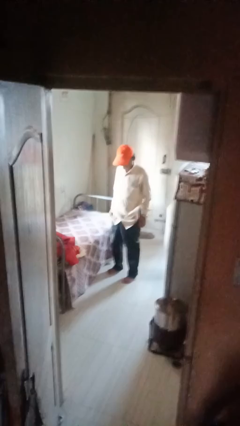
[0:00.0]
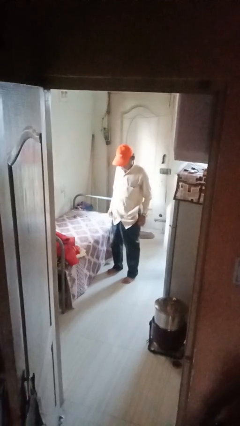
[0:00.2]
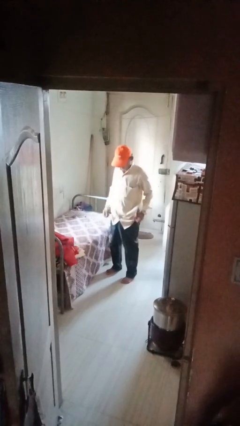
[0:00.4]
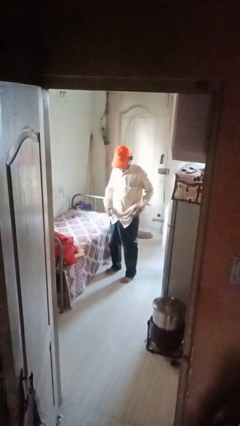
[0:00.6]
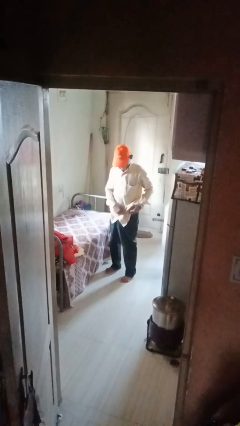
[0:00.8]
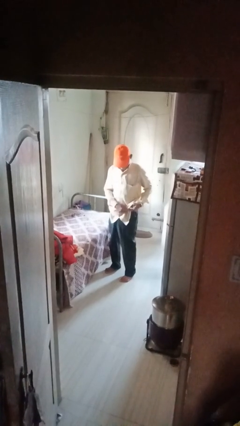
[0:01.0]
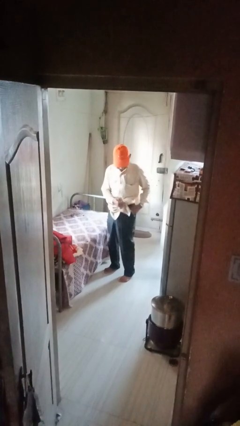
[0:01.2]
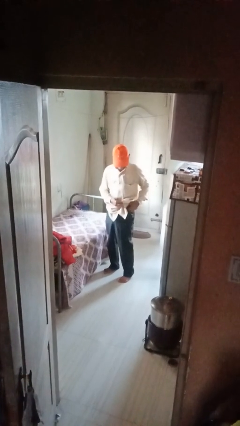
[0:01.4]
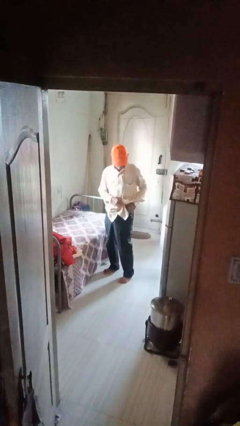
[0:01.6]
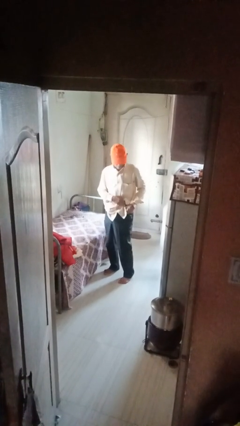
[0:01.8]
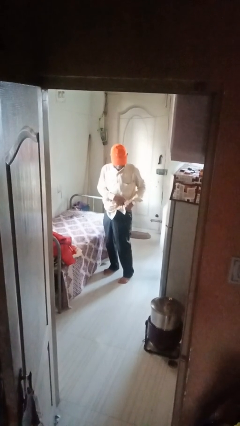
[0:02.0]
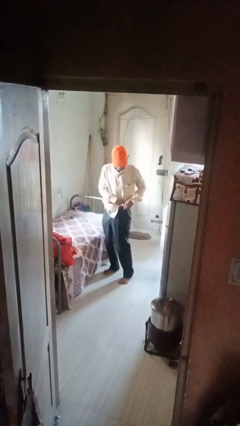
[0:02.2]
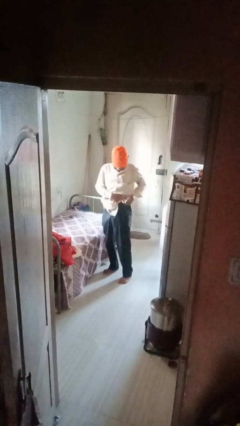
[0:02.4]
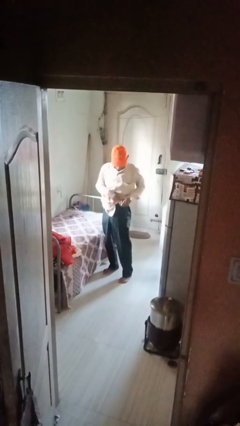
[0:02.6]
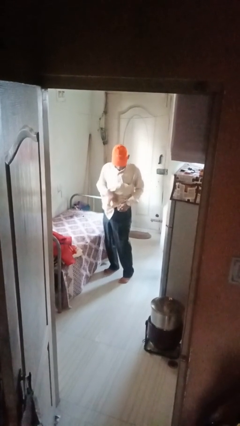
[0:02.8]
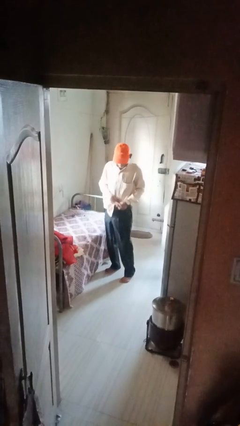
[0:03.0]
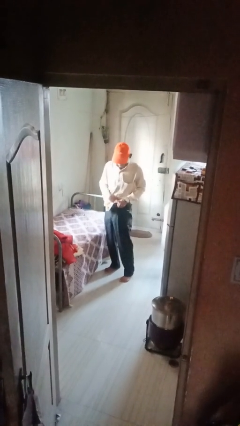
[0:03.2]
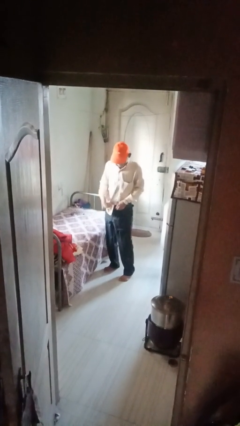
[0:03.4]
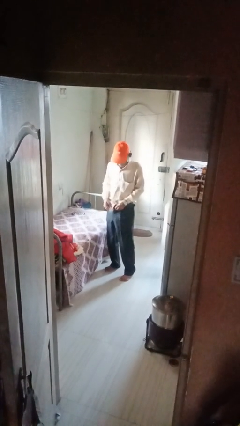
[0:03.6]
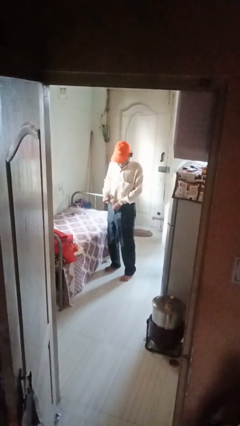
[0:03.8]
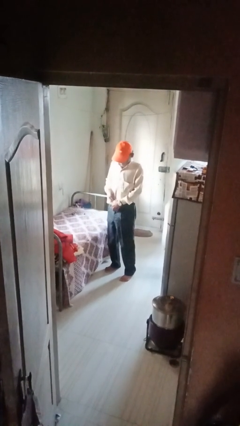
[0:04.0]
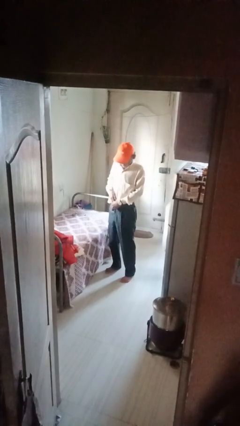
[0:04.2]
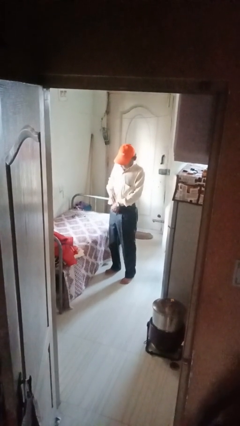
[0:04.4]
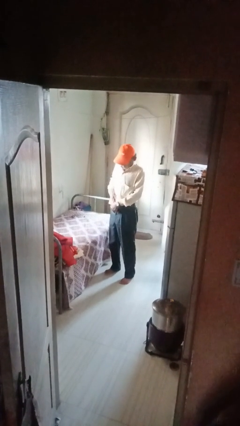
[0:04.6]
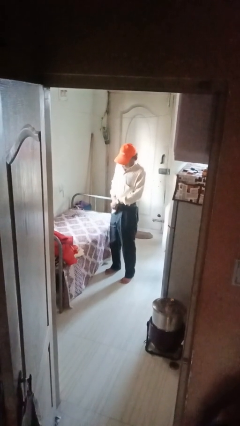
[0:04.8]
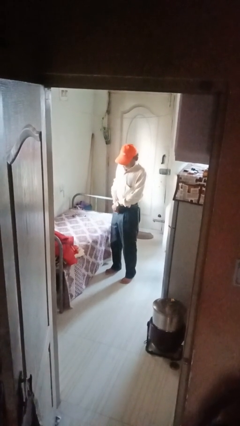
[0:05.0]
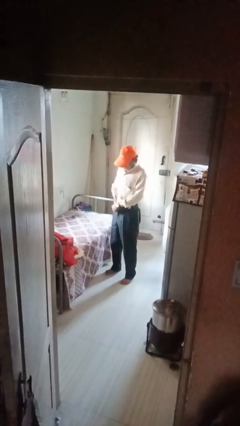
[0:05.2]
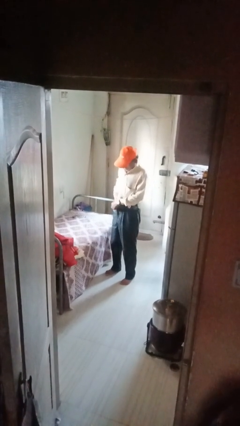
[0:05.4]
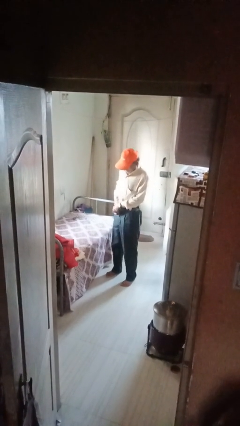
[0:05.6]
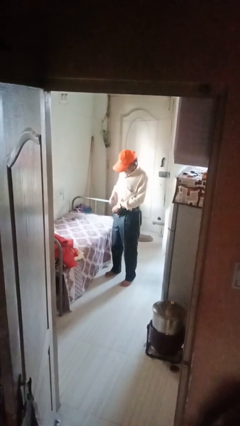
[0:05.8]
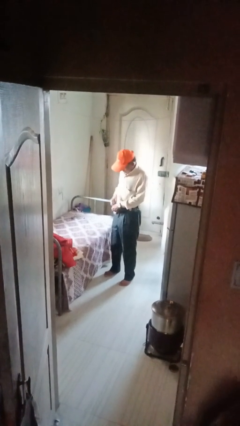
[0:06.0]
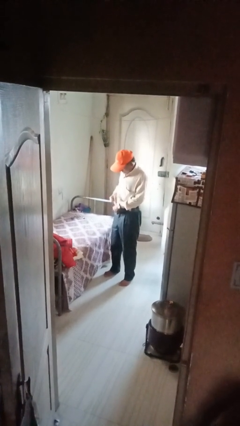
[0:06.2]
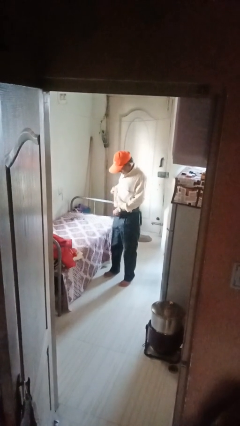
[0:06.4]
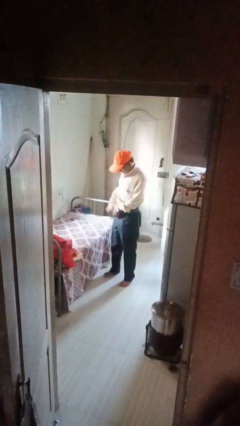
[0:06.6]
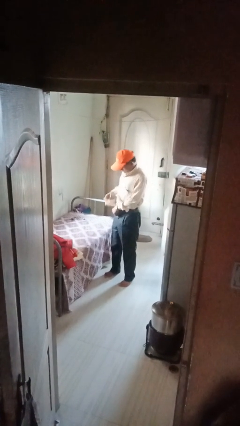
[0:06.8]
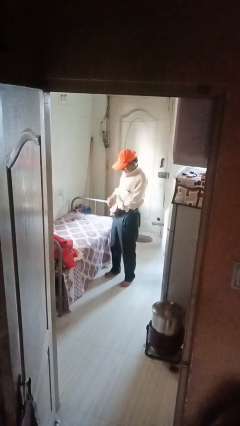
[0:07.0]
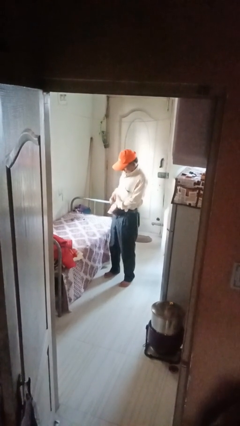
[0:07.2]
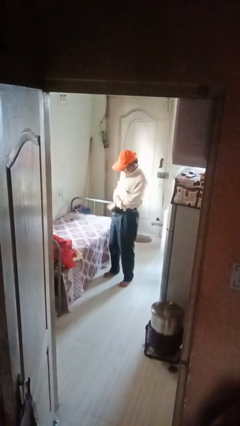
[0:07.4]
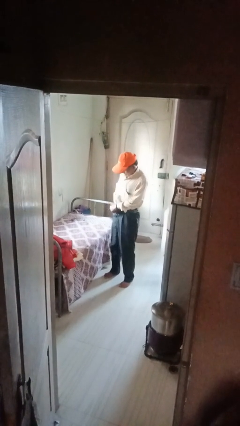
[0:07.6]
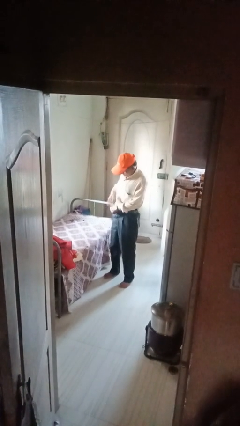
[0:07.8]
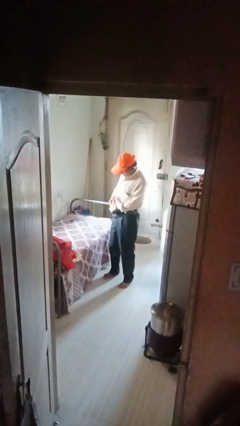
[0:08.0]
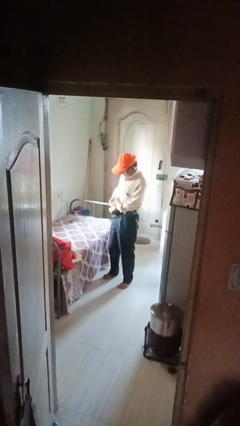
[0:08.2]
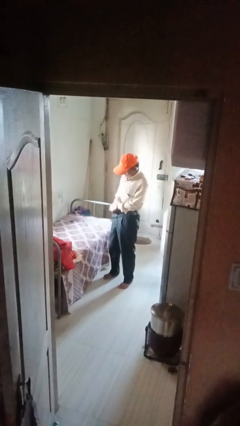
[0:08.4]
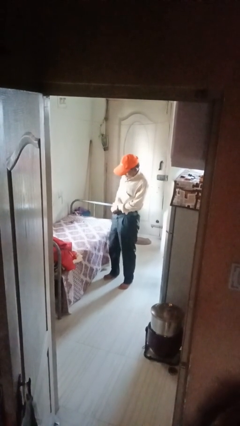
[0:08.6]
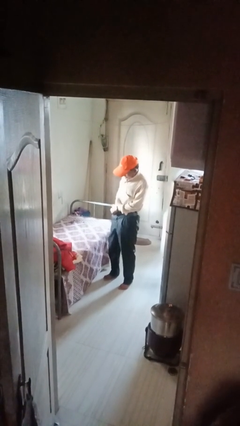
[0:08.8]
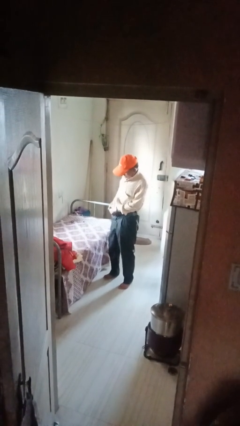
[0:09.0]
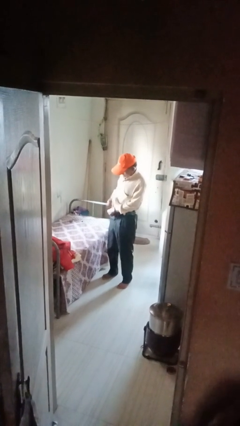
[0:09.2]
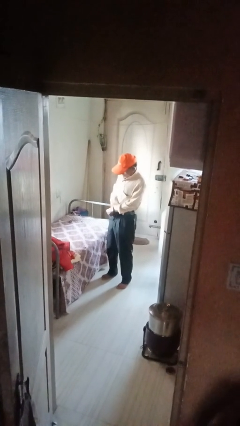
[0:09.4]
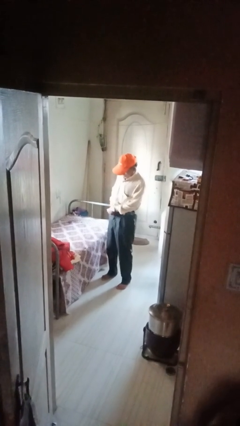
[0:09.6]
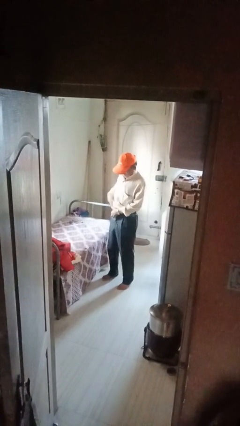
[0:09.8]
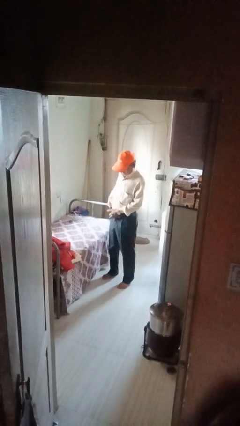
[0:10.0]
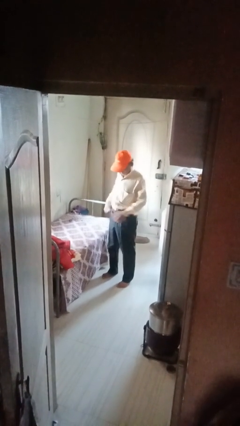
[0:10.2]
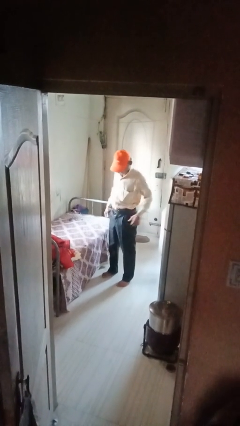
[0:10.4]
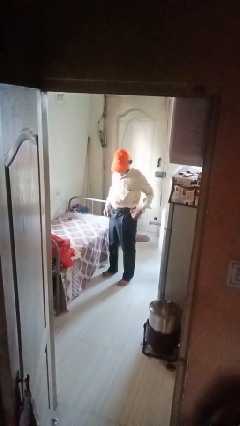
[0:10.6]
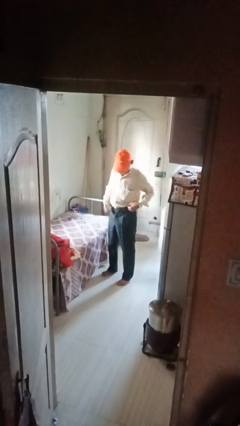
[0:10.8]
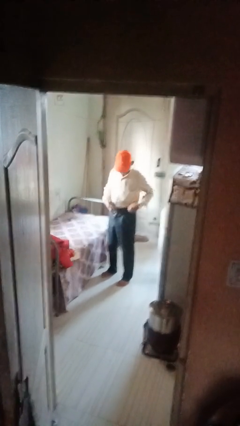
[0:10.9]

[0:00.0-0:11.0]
person tucks in shirt

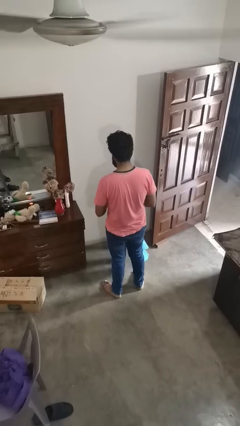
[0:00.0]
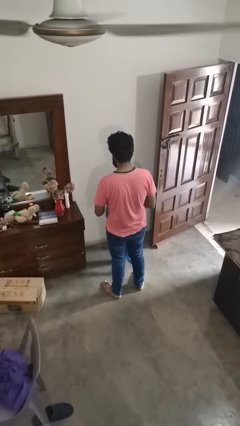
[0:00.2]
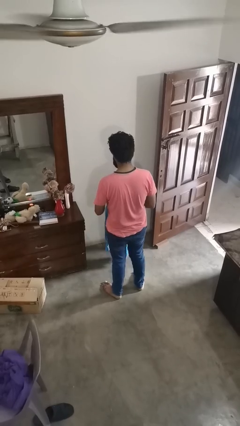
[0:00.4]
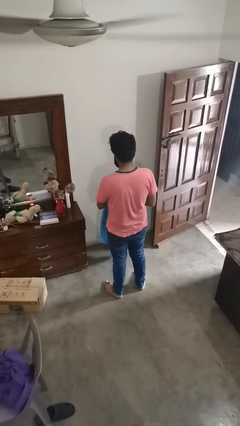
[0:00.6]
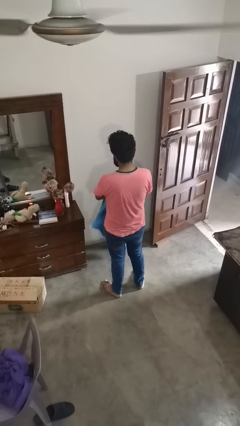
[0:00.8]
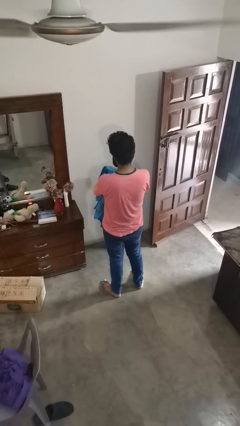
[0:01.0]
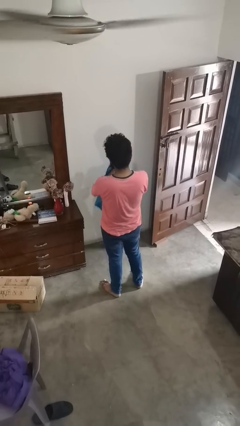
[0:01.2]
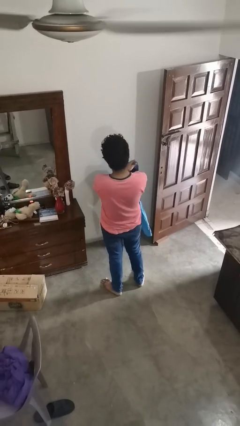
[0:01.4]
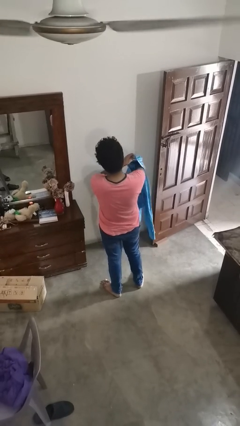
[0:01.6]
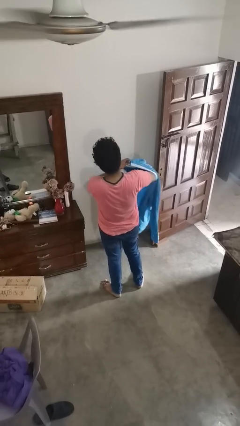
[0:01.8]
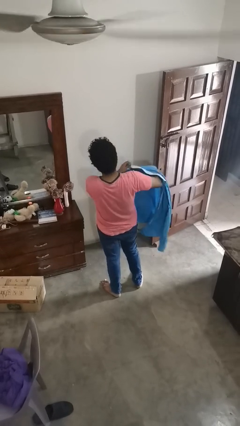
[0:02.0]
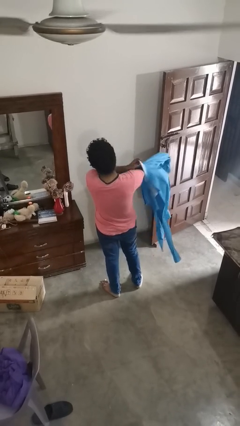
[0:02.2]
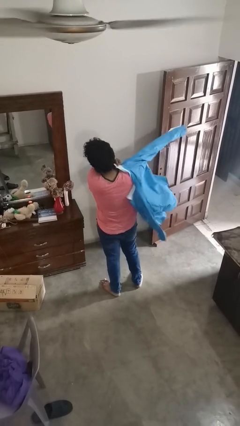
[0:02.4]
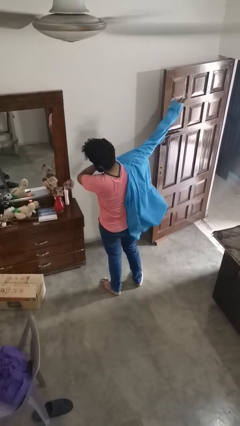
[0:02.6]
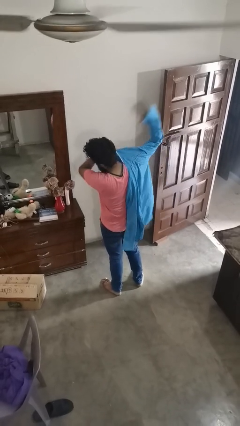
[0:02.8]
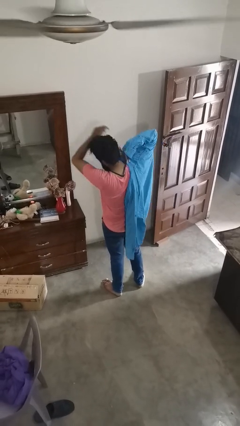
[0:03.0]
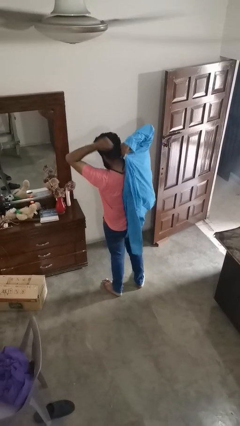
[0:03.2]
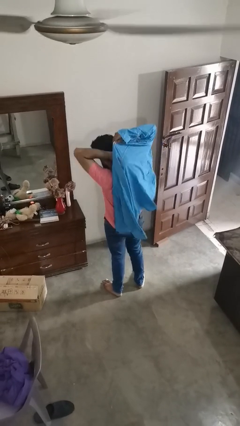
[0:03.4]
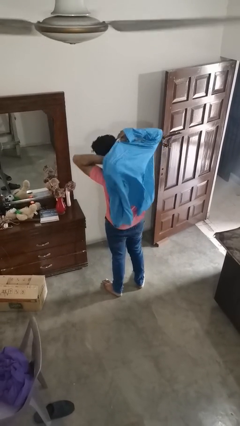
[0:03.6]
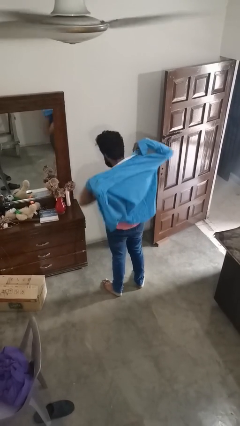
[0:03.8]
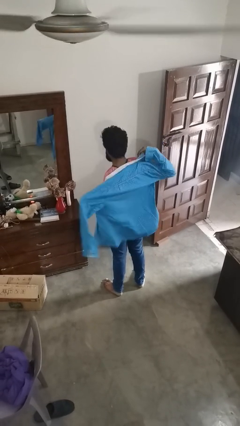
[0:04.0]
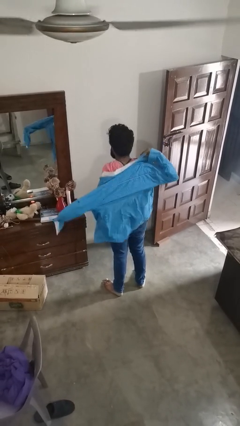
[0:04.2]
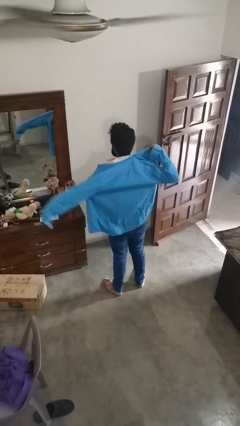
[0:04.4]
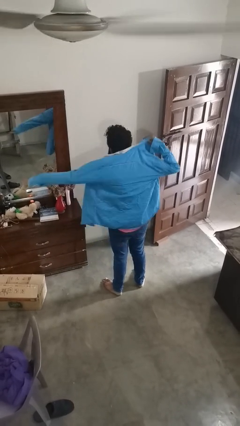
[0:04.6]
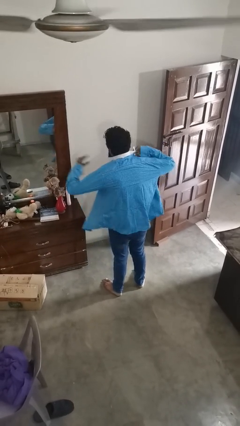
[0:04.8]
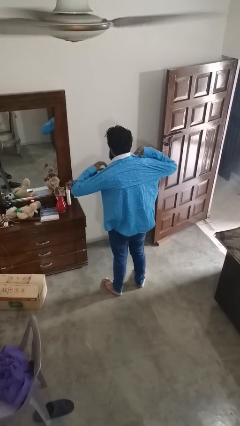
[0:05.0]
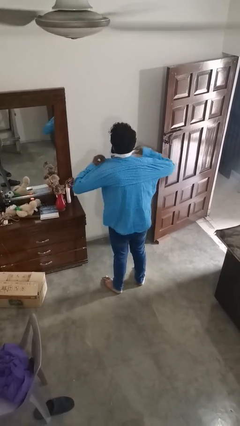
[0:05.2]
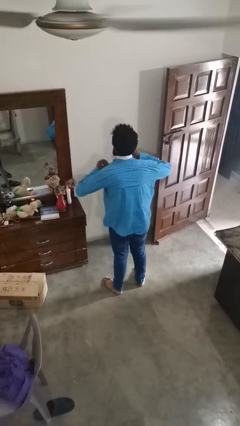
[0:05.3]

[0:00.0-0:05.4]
person puts on shirt

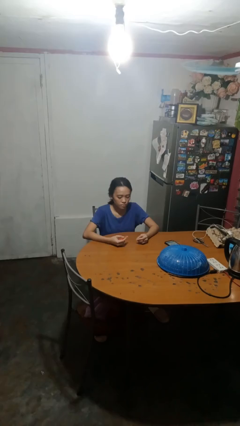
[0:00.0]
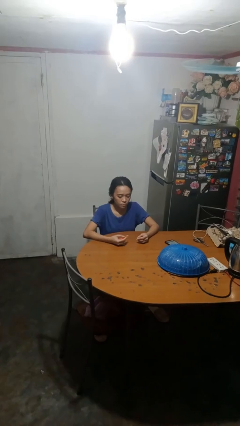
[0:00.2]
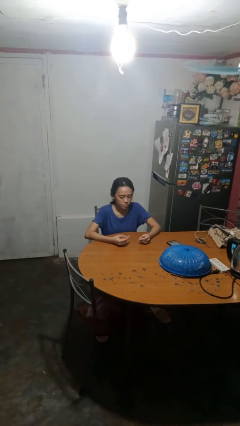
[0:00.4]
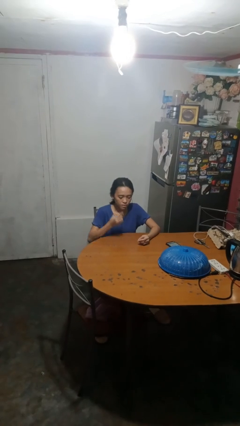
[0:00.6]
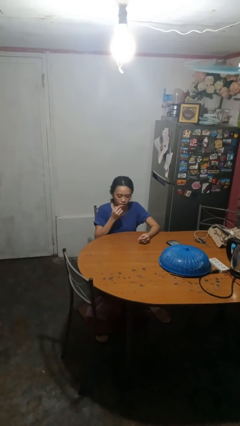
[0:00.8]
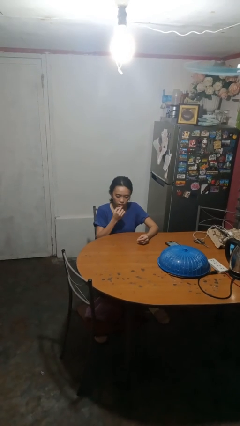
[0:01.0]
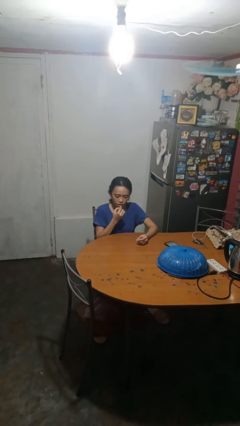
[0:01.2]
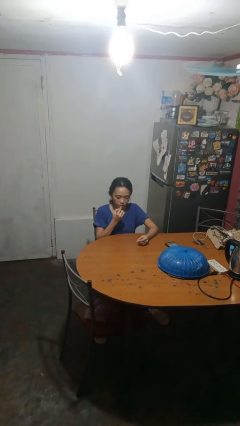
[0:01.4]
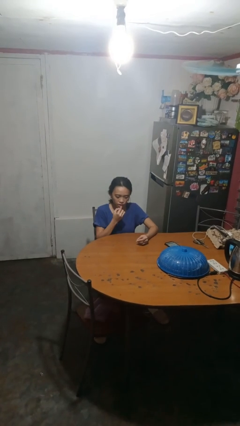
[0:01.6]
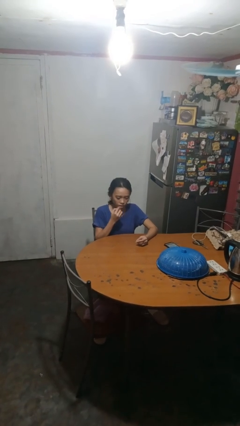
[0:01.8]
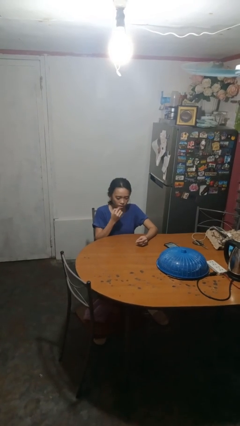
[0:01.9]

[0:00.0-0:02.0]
person applies lip makeup
